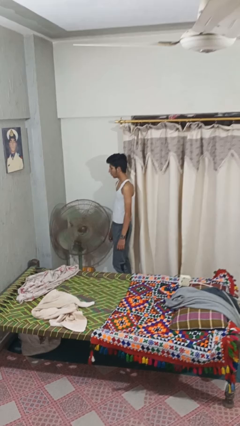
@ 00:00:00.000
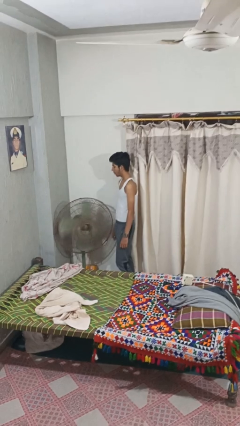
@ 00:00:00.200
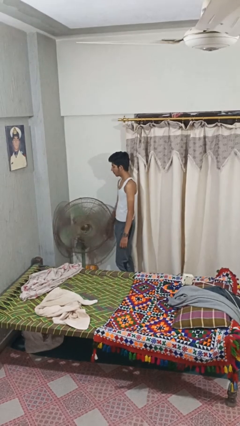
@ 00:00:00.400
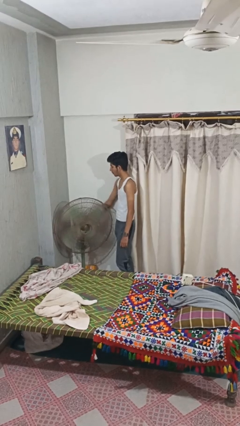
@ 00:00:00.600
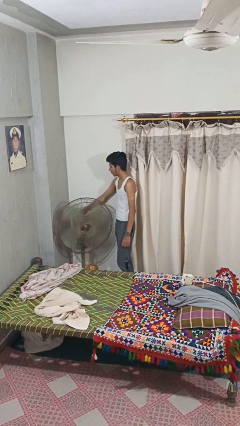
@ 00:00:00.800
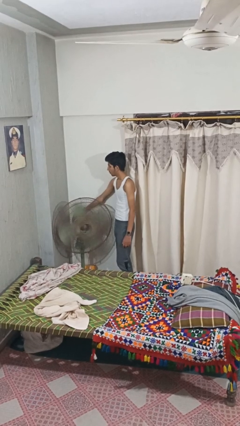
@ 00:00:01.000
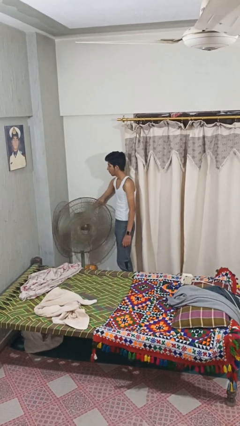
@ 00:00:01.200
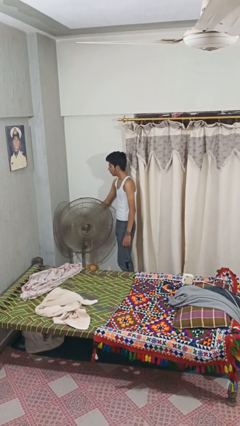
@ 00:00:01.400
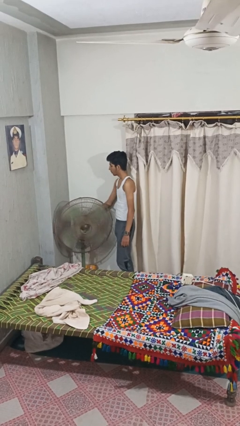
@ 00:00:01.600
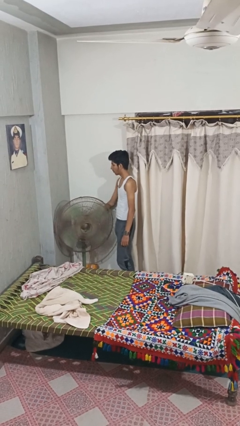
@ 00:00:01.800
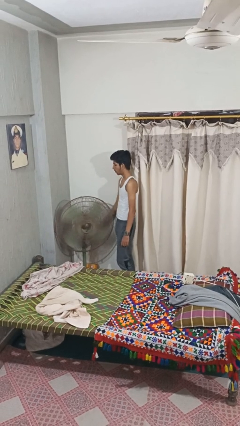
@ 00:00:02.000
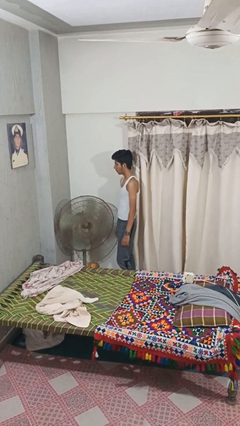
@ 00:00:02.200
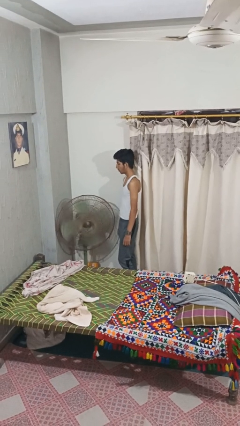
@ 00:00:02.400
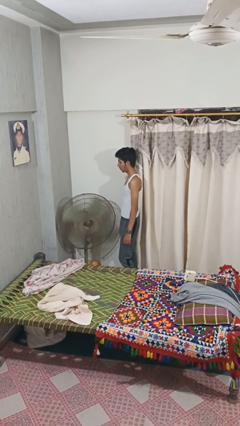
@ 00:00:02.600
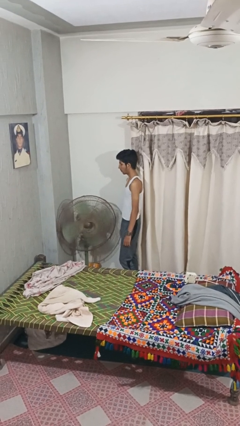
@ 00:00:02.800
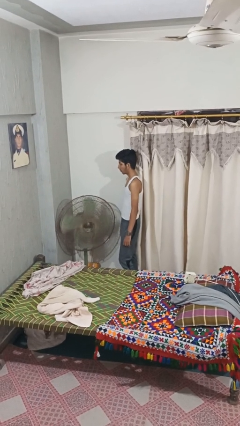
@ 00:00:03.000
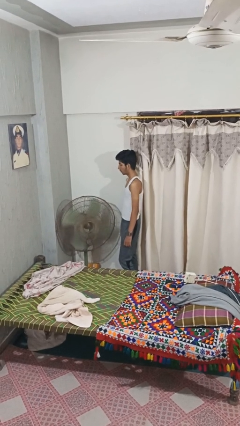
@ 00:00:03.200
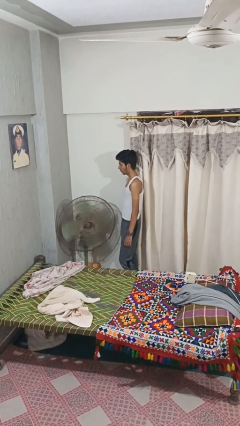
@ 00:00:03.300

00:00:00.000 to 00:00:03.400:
person turns off fan

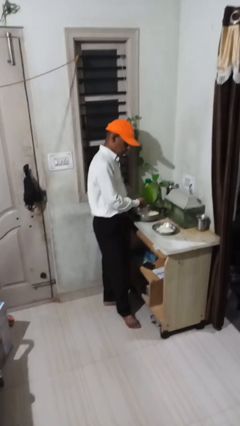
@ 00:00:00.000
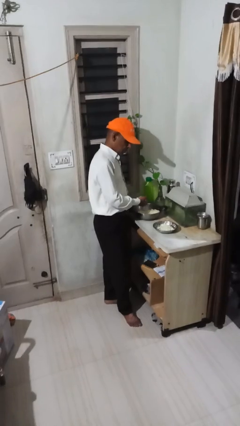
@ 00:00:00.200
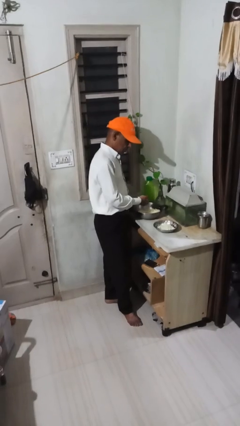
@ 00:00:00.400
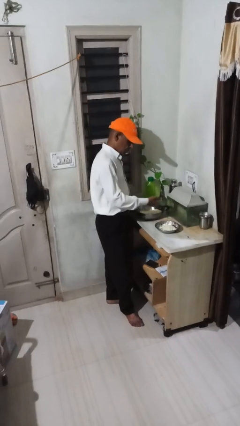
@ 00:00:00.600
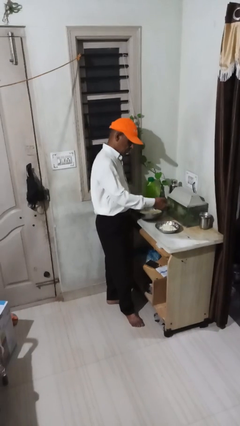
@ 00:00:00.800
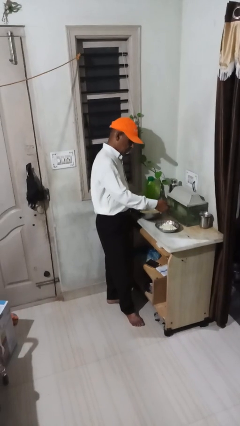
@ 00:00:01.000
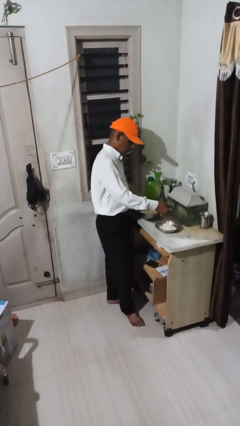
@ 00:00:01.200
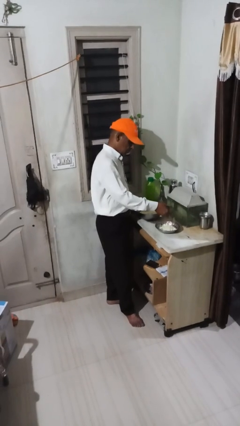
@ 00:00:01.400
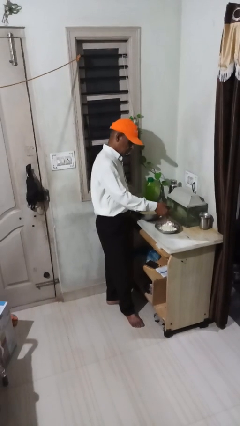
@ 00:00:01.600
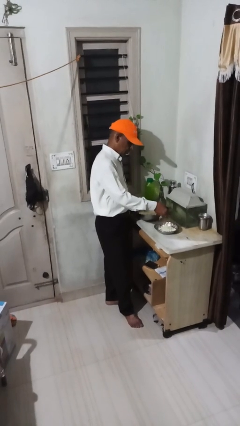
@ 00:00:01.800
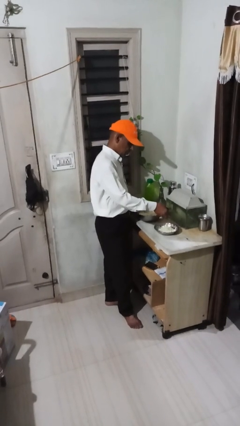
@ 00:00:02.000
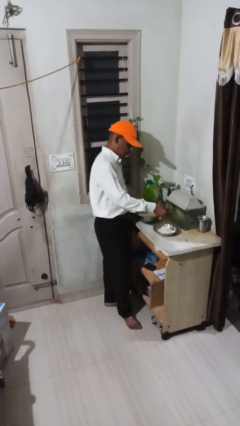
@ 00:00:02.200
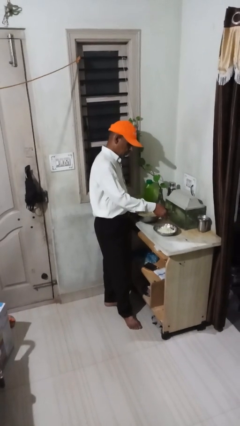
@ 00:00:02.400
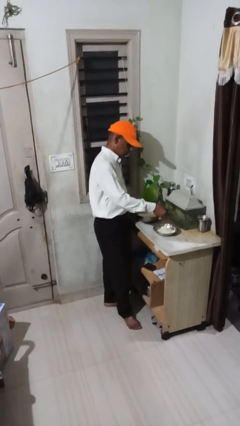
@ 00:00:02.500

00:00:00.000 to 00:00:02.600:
person pours into bowl

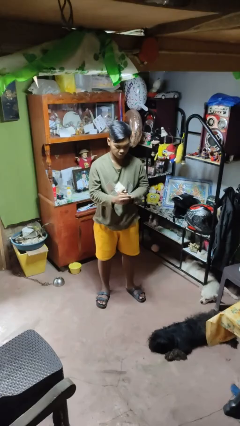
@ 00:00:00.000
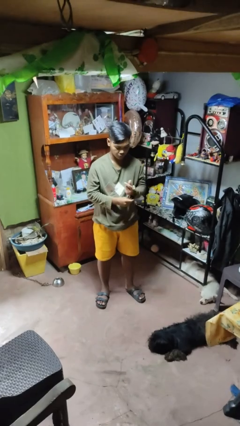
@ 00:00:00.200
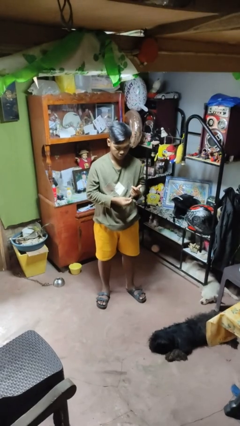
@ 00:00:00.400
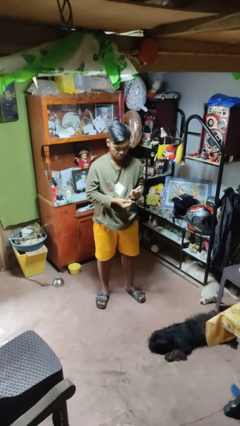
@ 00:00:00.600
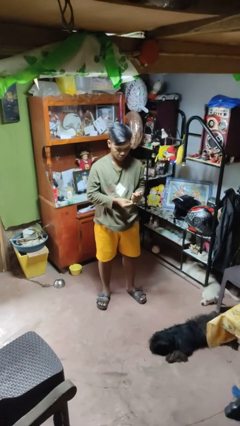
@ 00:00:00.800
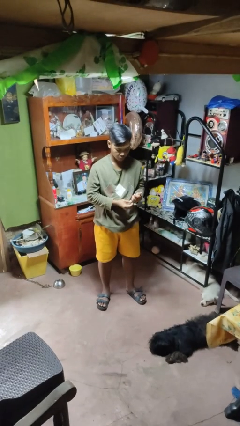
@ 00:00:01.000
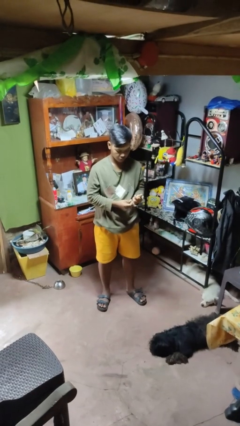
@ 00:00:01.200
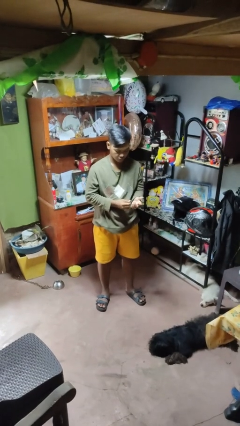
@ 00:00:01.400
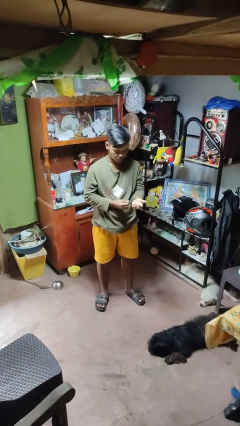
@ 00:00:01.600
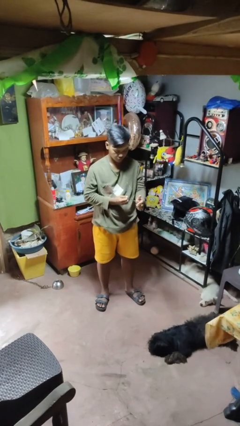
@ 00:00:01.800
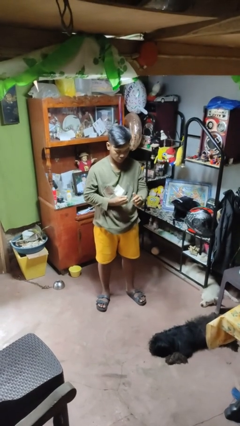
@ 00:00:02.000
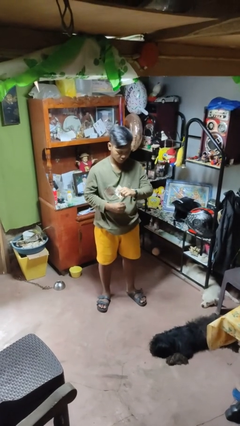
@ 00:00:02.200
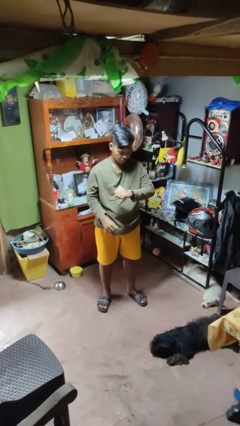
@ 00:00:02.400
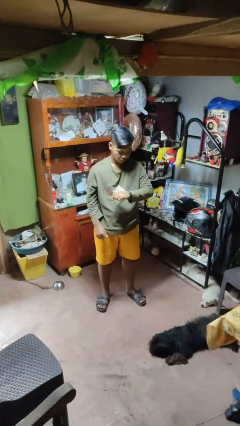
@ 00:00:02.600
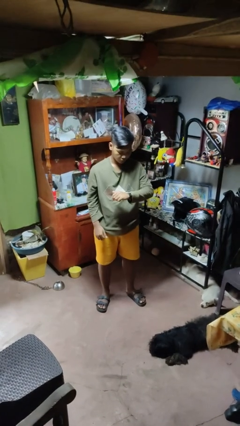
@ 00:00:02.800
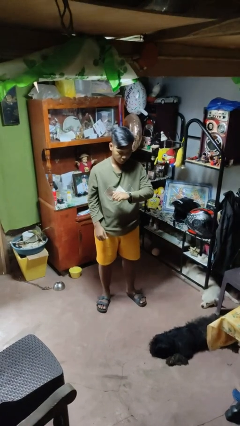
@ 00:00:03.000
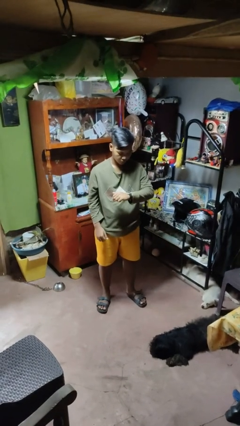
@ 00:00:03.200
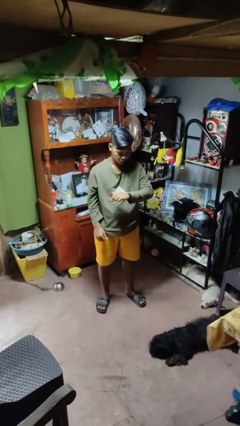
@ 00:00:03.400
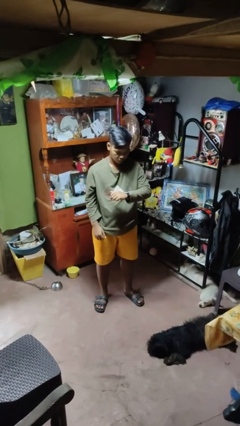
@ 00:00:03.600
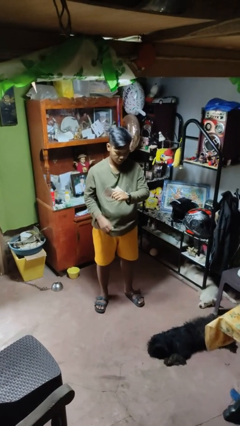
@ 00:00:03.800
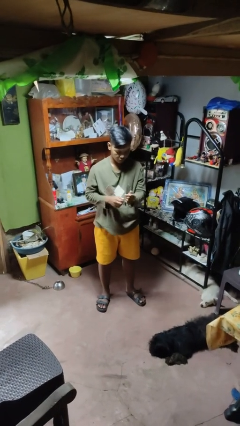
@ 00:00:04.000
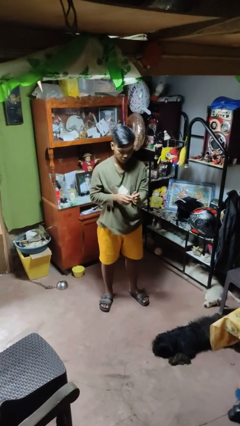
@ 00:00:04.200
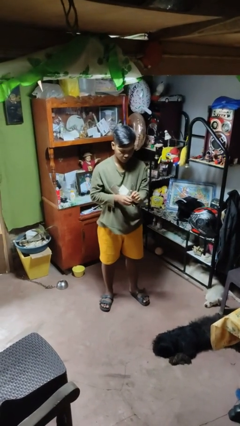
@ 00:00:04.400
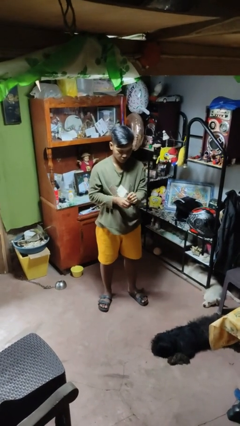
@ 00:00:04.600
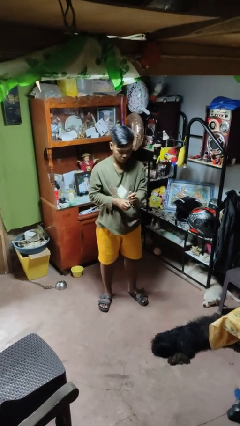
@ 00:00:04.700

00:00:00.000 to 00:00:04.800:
person puts on wristwatch

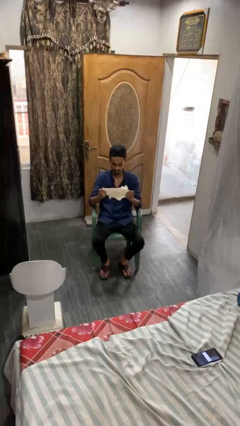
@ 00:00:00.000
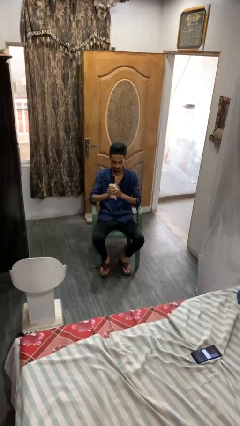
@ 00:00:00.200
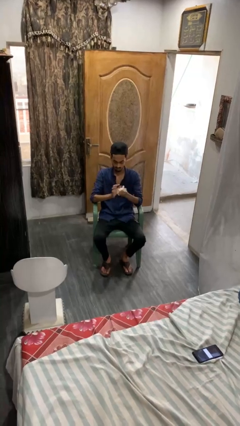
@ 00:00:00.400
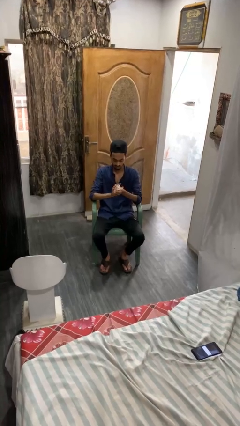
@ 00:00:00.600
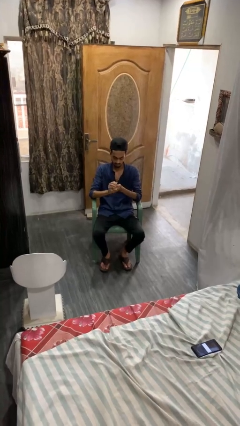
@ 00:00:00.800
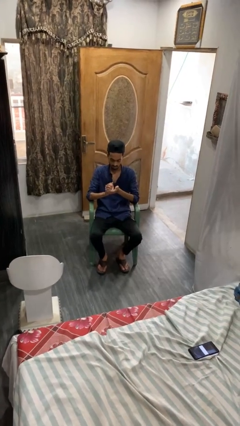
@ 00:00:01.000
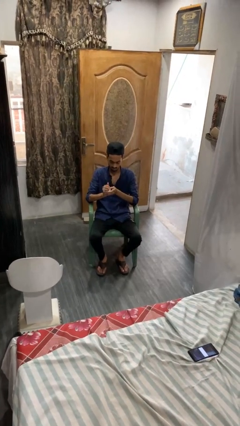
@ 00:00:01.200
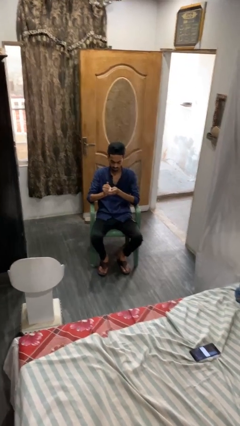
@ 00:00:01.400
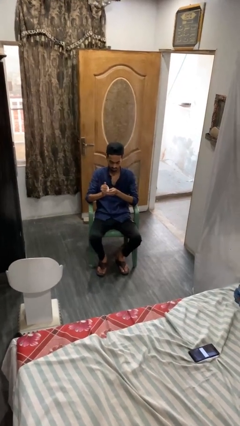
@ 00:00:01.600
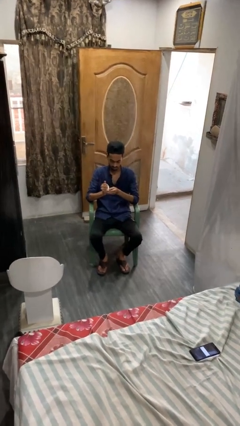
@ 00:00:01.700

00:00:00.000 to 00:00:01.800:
person crumples paper

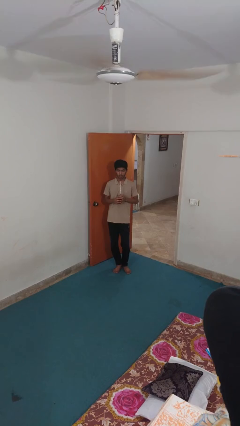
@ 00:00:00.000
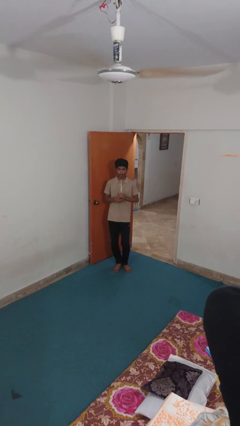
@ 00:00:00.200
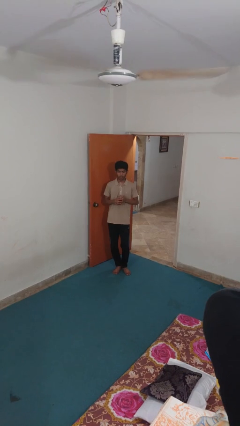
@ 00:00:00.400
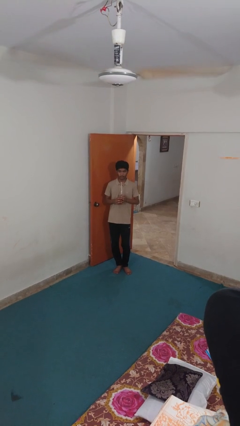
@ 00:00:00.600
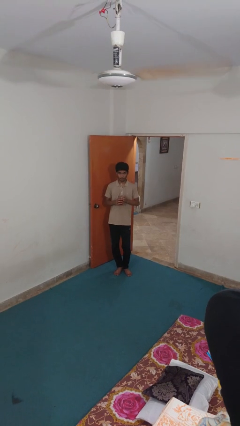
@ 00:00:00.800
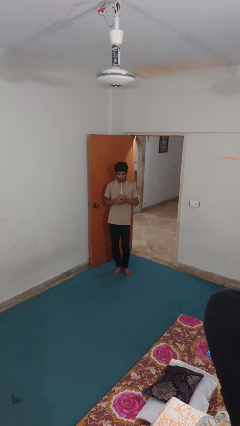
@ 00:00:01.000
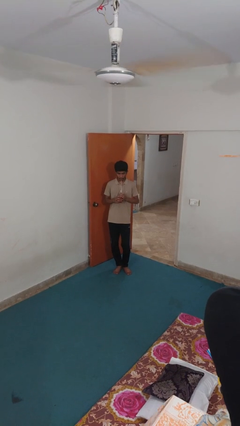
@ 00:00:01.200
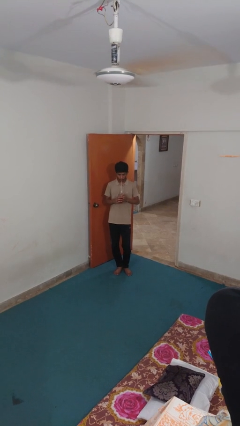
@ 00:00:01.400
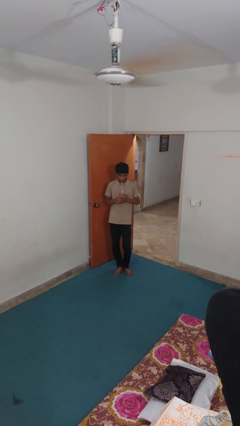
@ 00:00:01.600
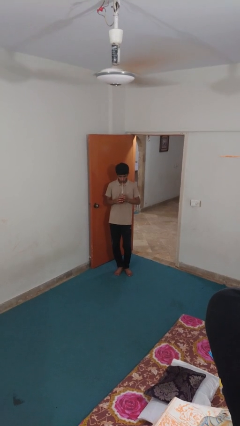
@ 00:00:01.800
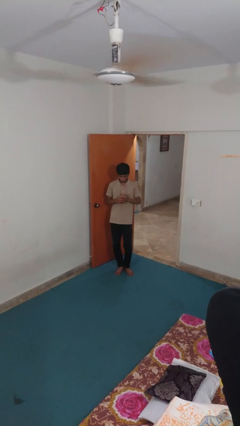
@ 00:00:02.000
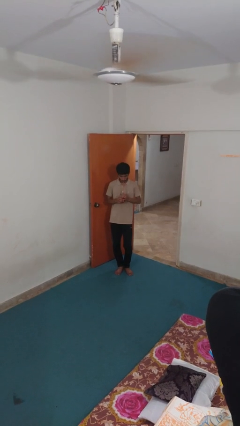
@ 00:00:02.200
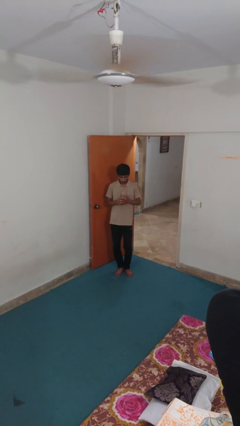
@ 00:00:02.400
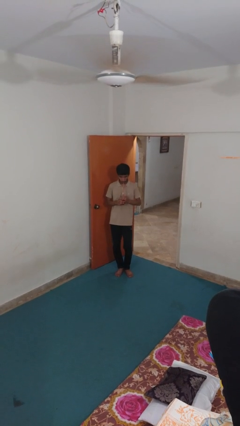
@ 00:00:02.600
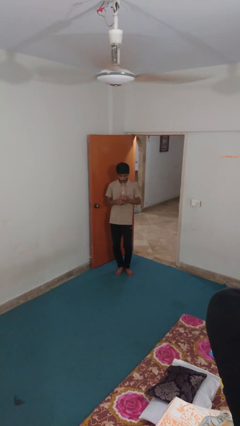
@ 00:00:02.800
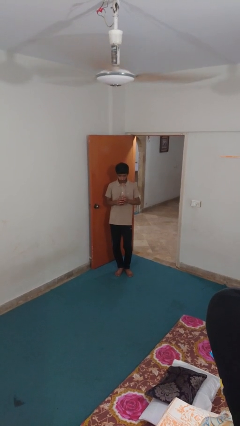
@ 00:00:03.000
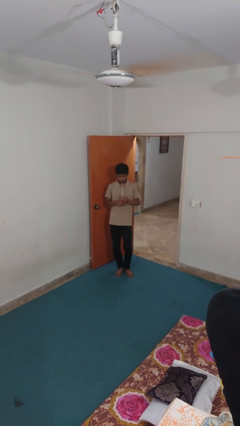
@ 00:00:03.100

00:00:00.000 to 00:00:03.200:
person drinks from straw

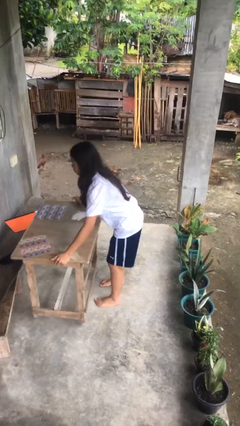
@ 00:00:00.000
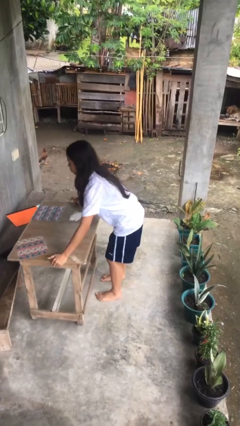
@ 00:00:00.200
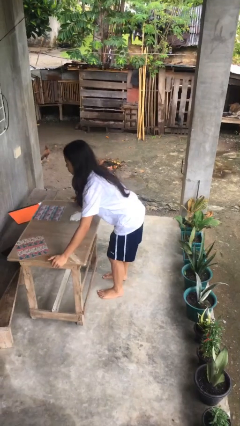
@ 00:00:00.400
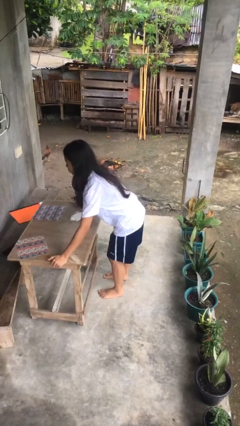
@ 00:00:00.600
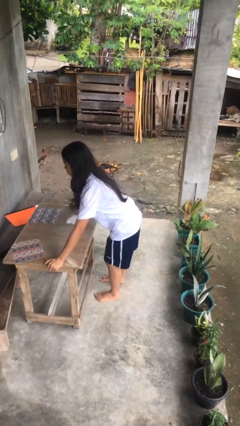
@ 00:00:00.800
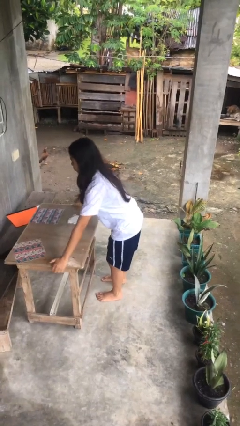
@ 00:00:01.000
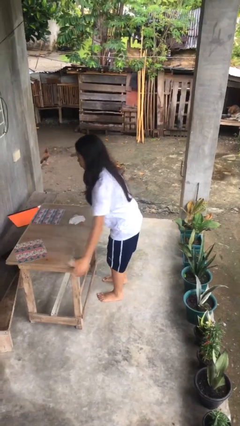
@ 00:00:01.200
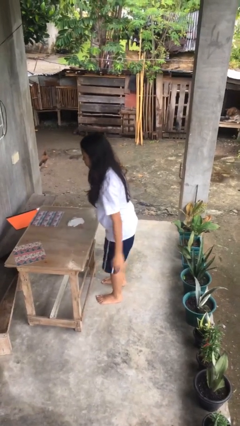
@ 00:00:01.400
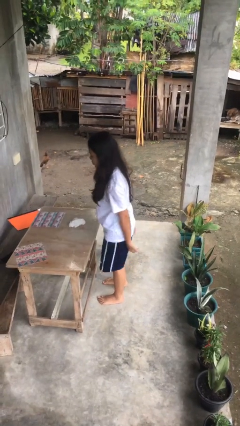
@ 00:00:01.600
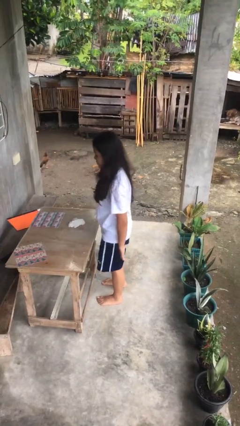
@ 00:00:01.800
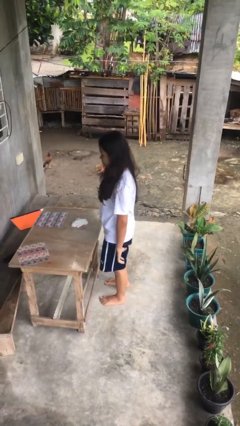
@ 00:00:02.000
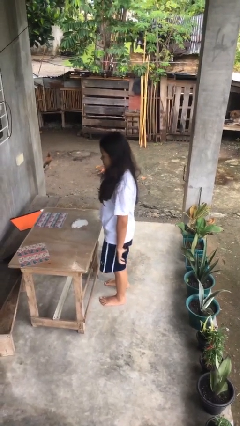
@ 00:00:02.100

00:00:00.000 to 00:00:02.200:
person puts down object on floor
